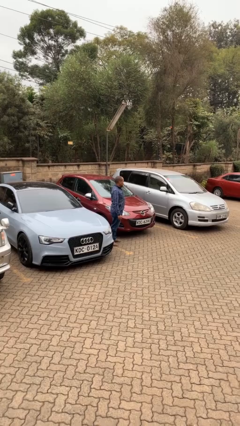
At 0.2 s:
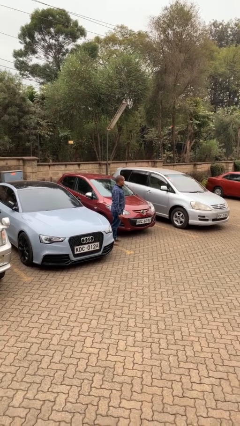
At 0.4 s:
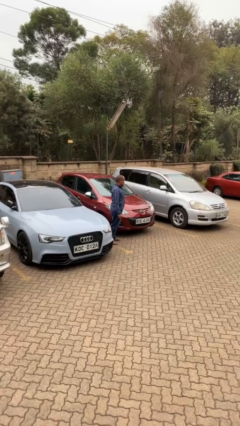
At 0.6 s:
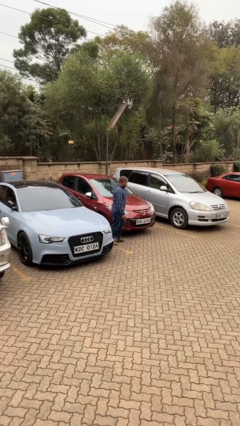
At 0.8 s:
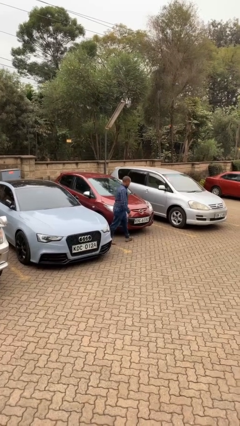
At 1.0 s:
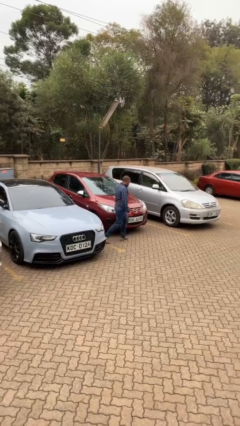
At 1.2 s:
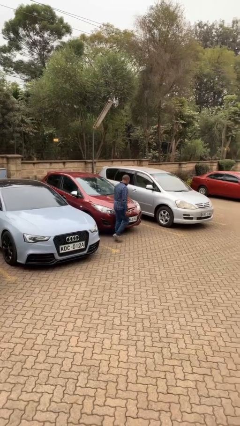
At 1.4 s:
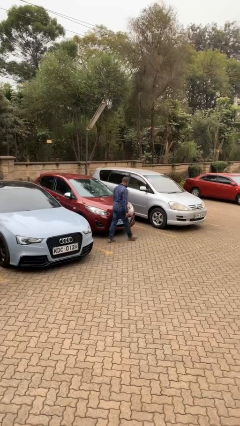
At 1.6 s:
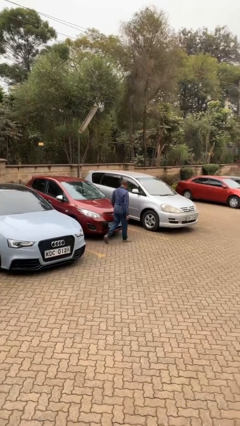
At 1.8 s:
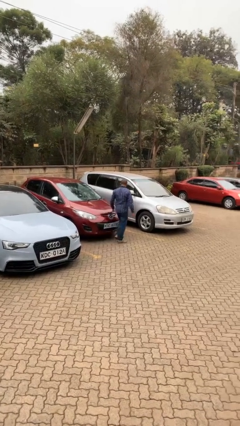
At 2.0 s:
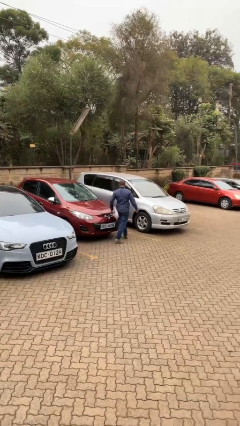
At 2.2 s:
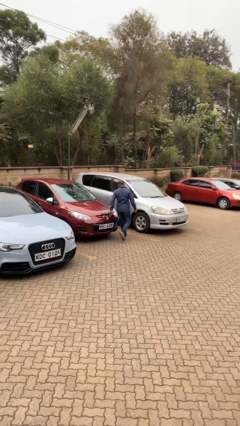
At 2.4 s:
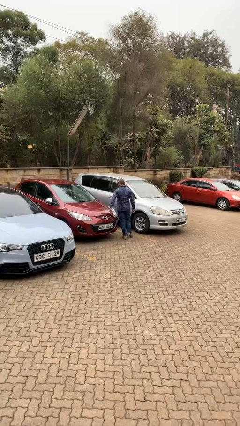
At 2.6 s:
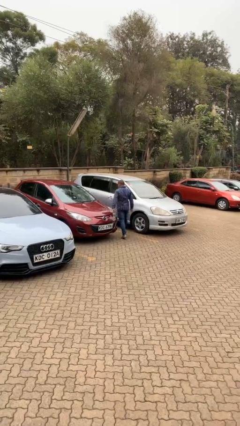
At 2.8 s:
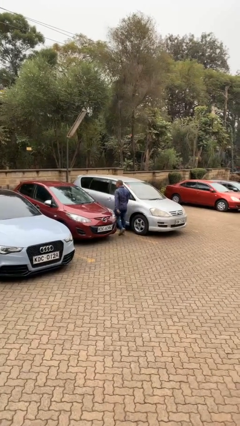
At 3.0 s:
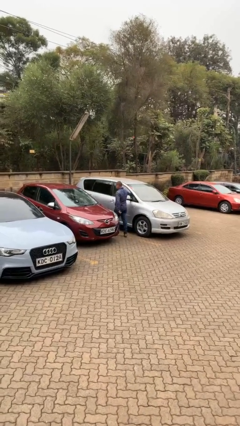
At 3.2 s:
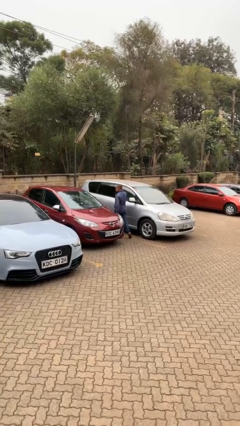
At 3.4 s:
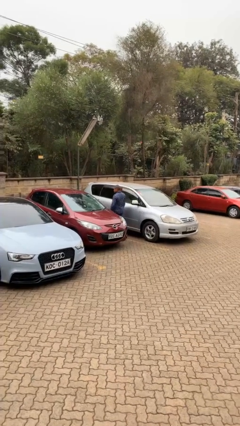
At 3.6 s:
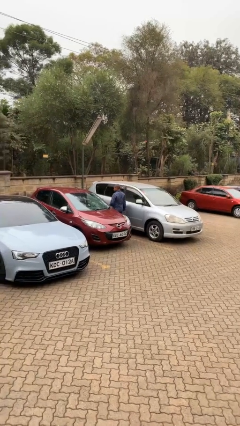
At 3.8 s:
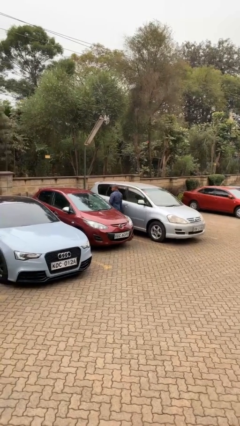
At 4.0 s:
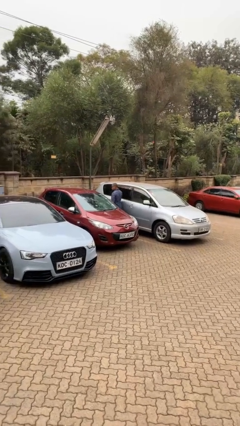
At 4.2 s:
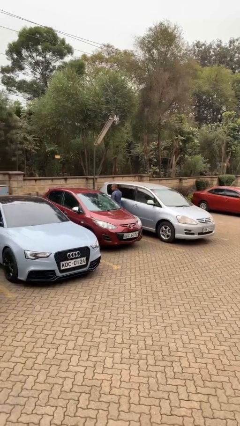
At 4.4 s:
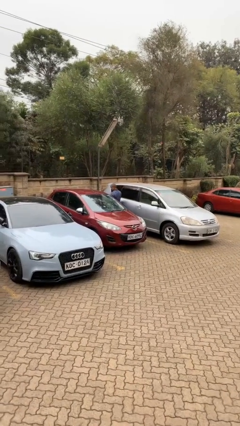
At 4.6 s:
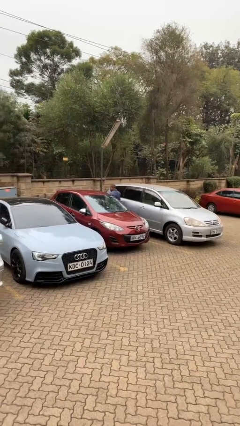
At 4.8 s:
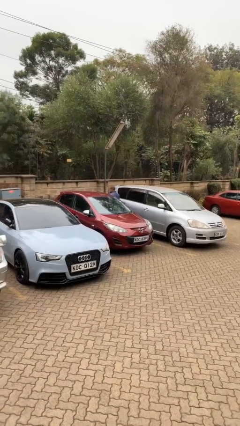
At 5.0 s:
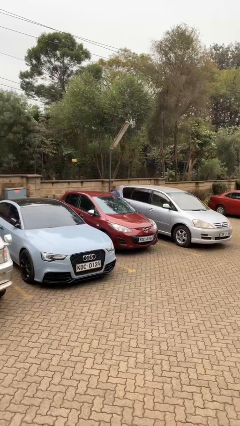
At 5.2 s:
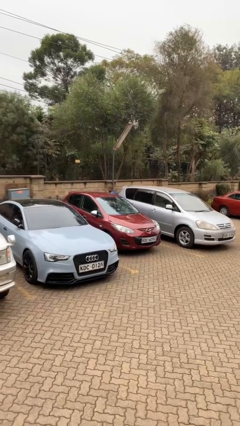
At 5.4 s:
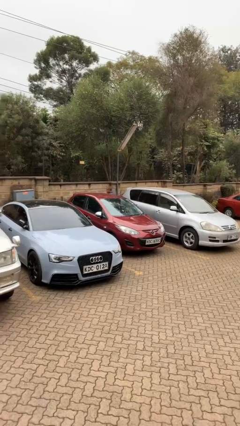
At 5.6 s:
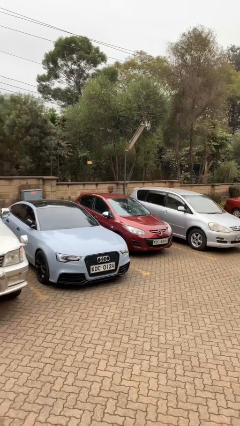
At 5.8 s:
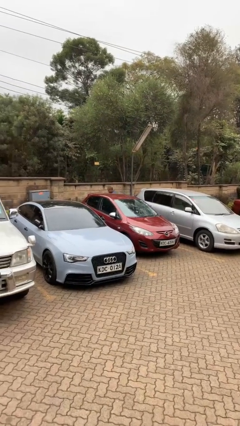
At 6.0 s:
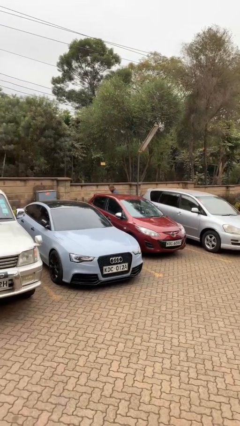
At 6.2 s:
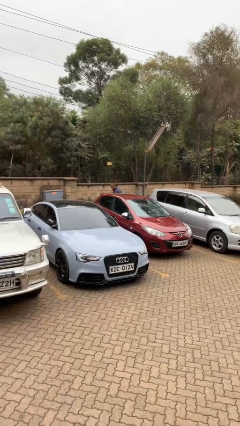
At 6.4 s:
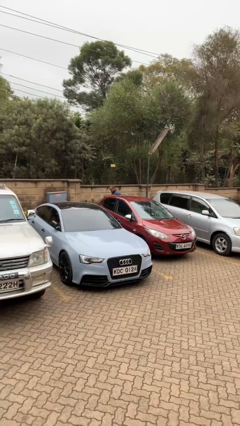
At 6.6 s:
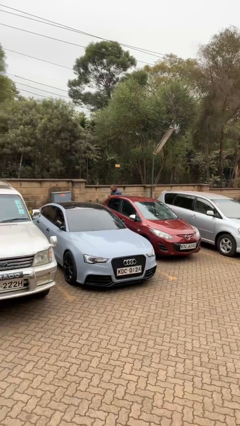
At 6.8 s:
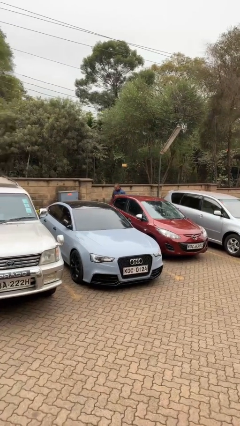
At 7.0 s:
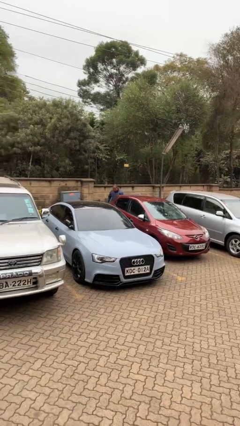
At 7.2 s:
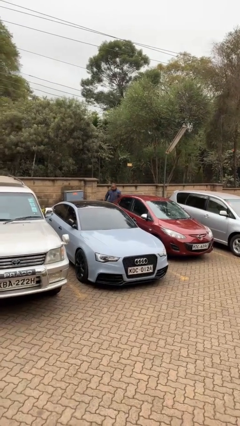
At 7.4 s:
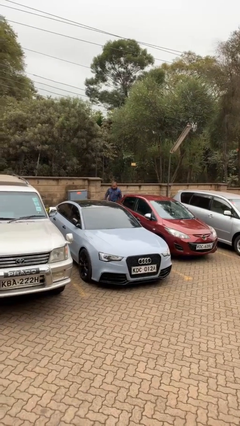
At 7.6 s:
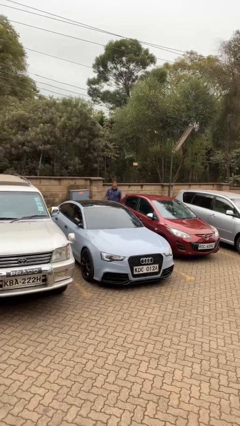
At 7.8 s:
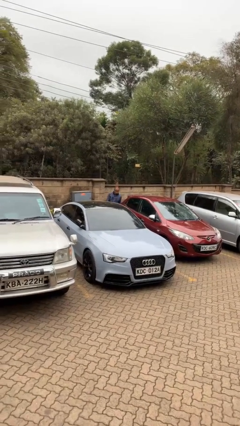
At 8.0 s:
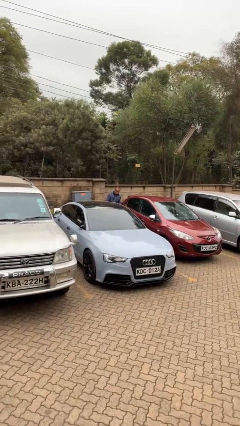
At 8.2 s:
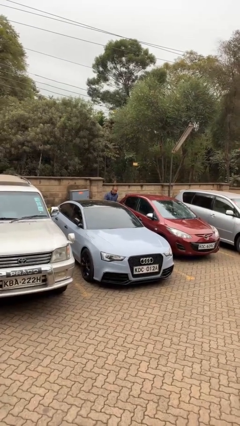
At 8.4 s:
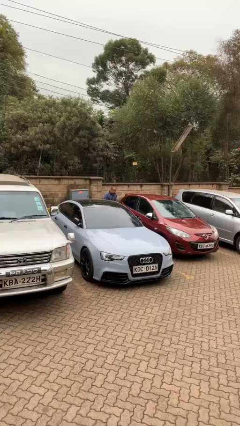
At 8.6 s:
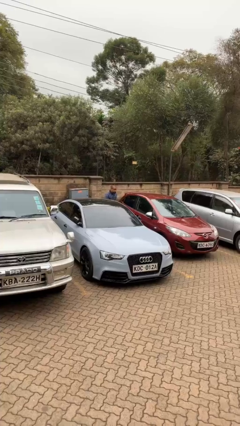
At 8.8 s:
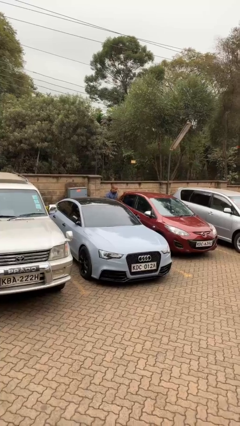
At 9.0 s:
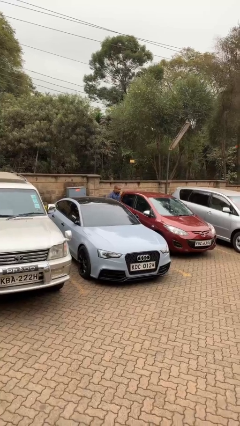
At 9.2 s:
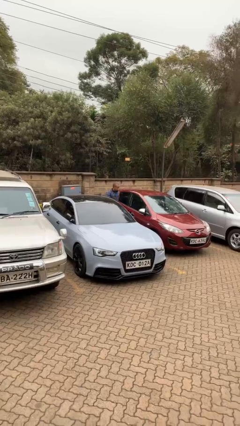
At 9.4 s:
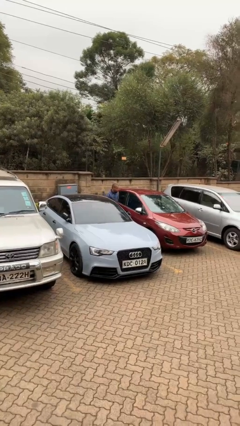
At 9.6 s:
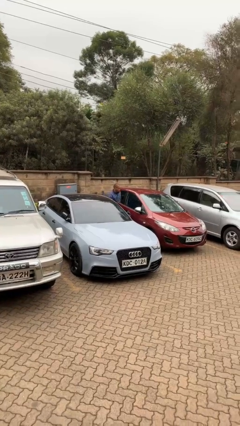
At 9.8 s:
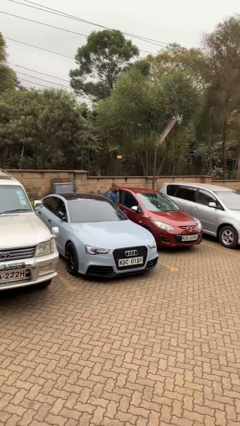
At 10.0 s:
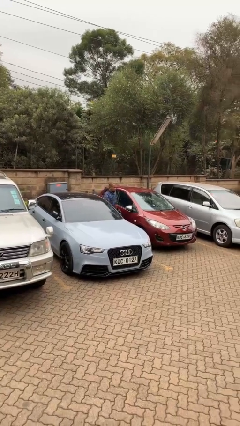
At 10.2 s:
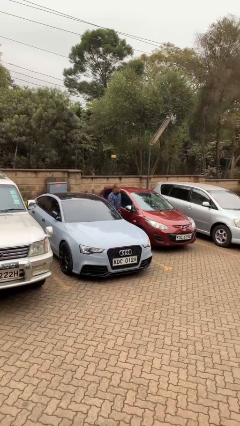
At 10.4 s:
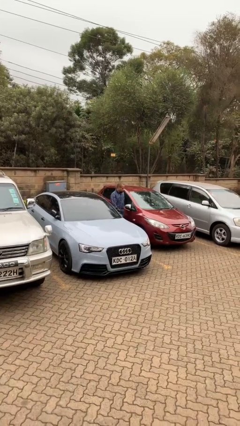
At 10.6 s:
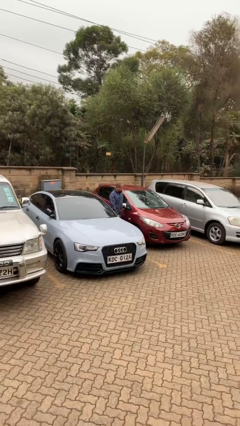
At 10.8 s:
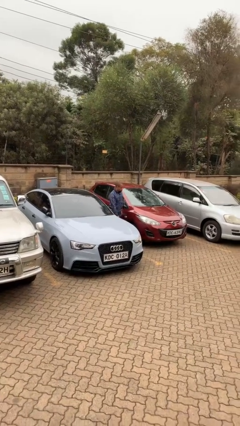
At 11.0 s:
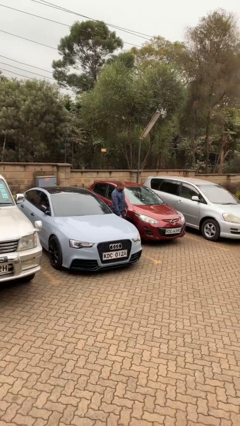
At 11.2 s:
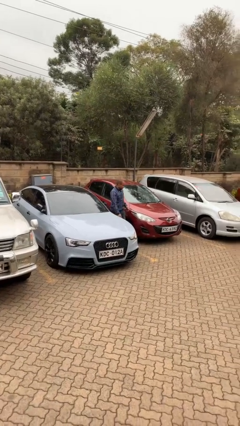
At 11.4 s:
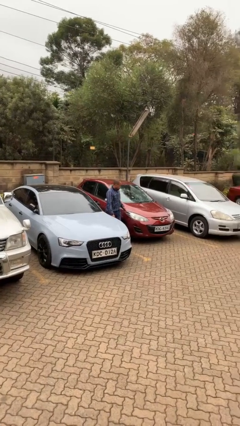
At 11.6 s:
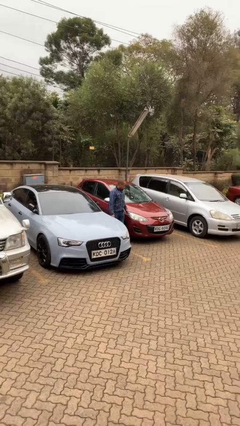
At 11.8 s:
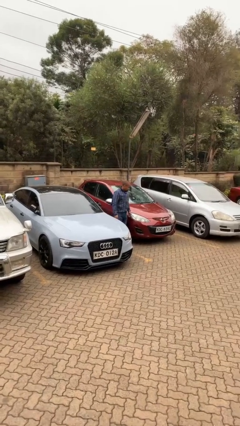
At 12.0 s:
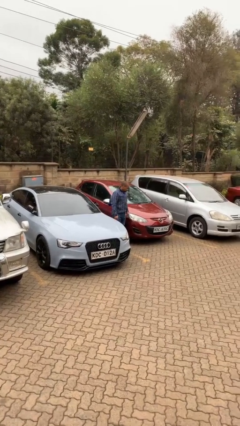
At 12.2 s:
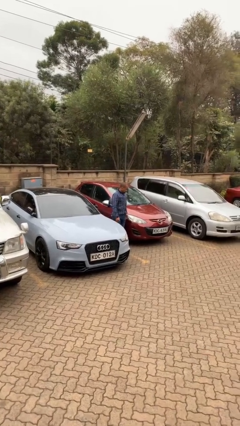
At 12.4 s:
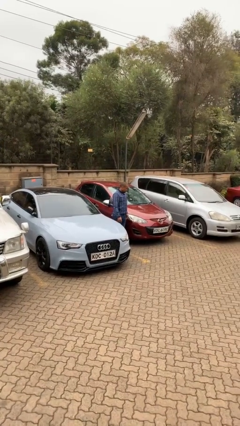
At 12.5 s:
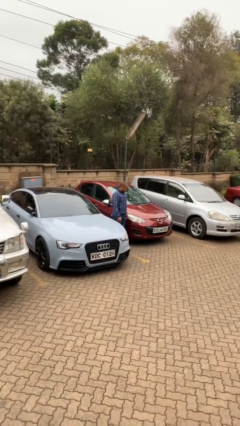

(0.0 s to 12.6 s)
person walks around car

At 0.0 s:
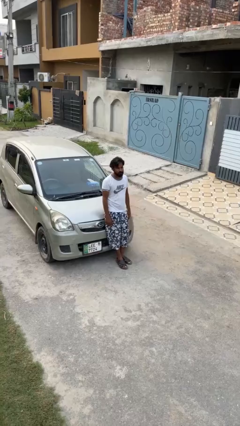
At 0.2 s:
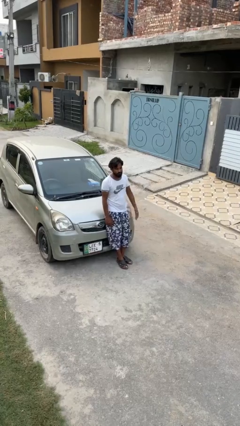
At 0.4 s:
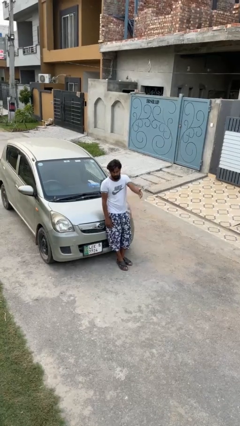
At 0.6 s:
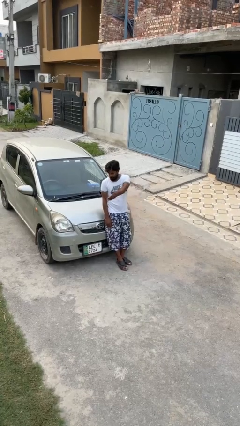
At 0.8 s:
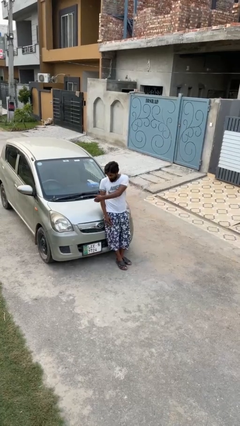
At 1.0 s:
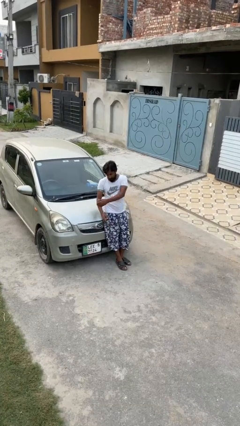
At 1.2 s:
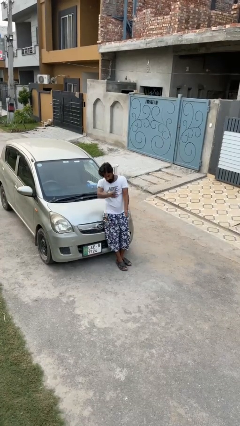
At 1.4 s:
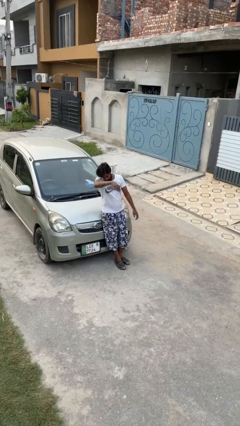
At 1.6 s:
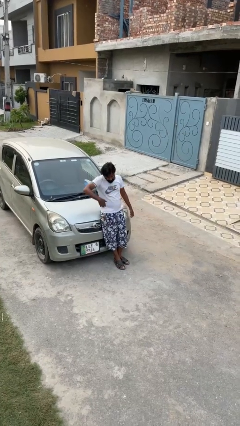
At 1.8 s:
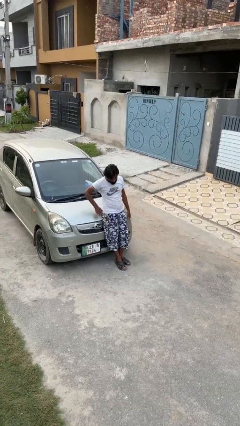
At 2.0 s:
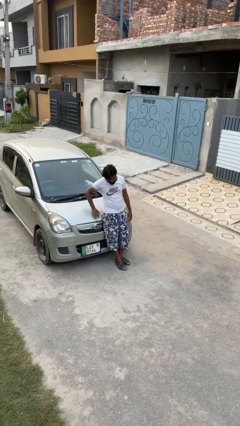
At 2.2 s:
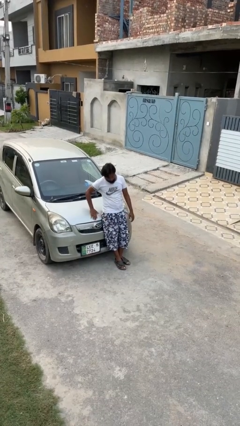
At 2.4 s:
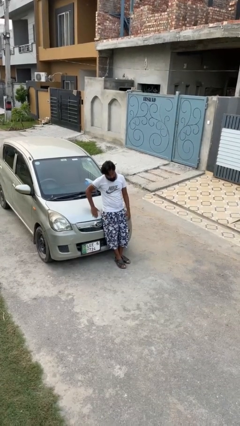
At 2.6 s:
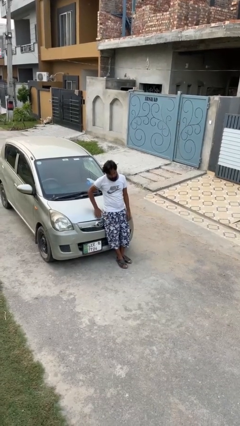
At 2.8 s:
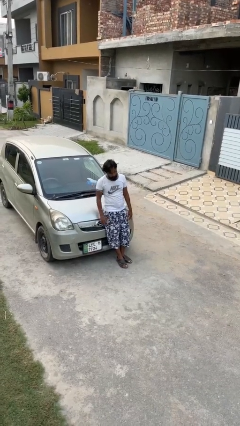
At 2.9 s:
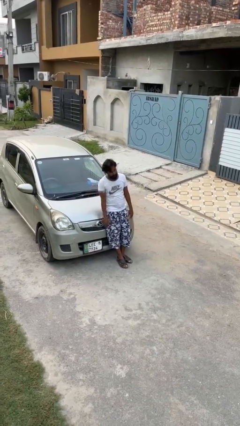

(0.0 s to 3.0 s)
person gestures come here

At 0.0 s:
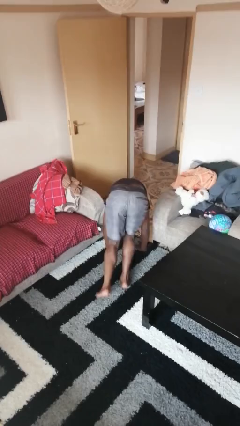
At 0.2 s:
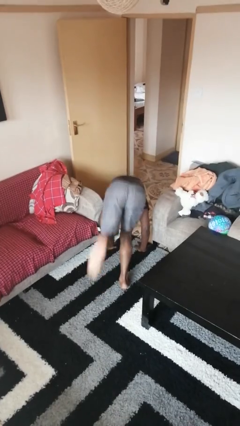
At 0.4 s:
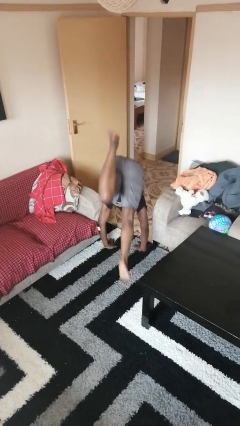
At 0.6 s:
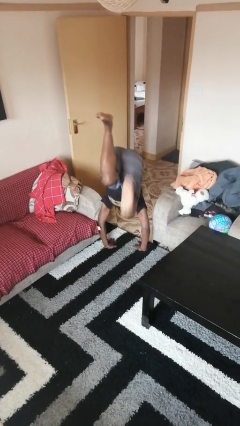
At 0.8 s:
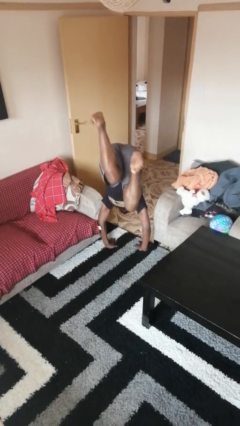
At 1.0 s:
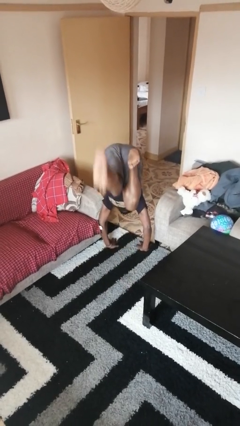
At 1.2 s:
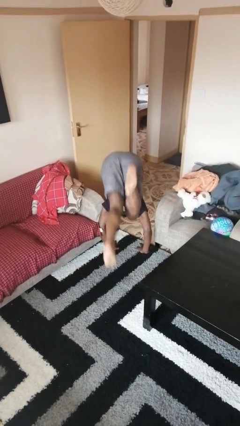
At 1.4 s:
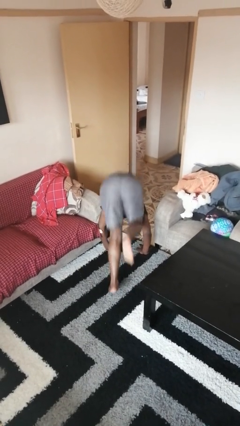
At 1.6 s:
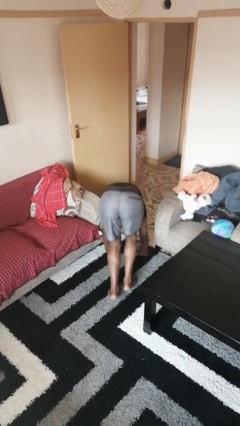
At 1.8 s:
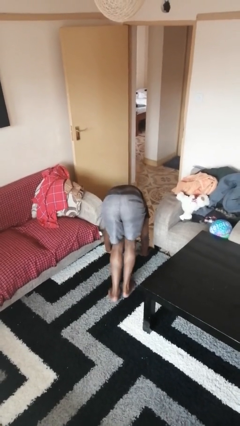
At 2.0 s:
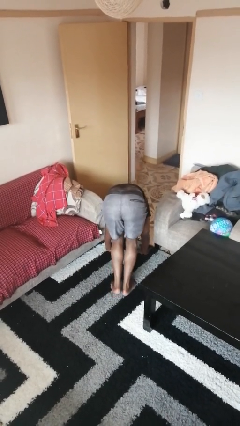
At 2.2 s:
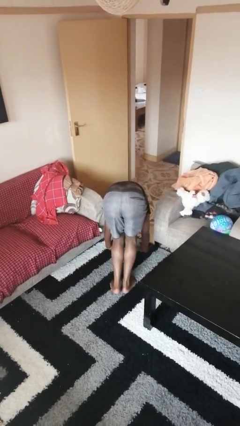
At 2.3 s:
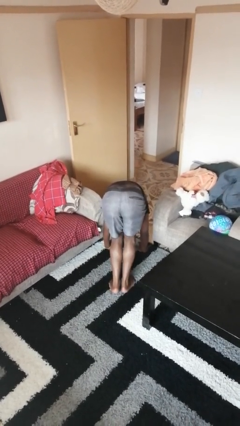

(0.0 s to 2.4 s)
person handstand

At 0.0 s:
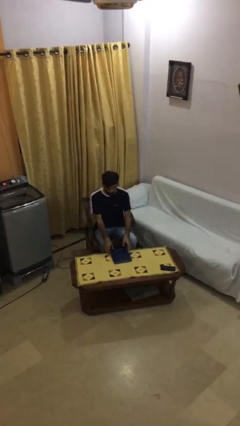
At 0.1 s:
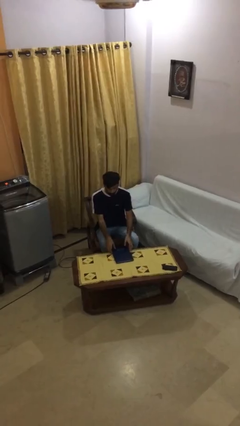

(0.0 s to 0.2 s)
person reads document
